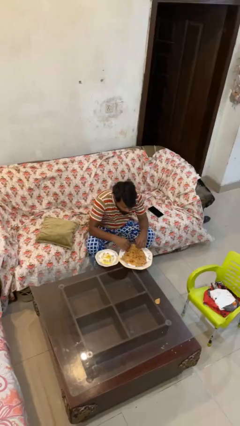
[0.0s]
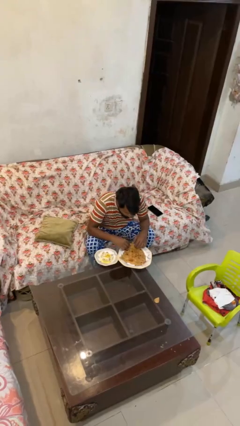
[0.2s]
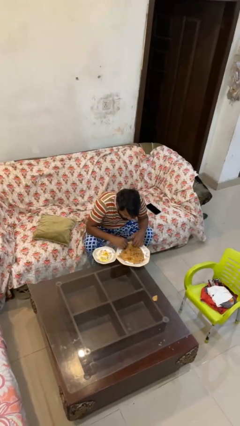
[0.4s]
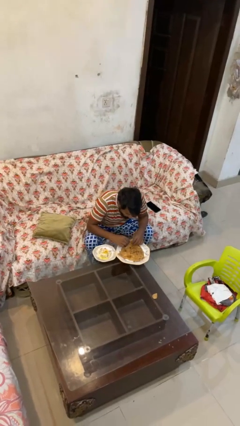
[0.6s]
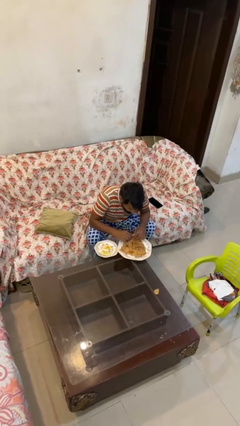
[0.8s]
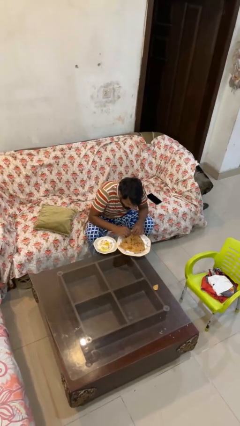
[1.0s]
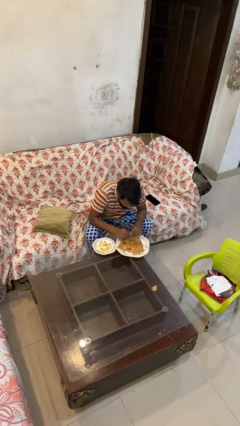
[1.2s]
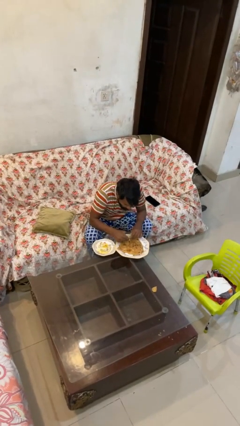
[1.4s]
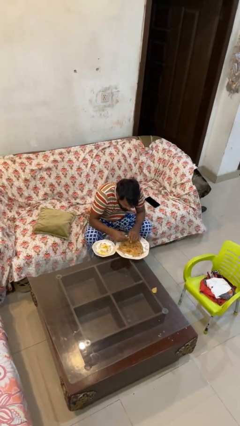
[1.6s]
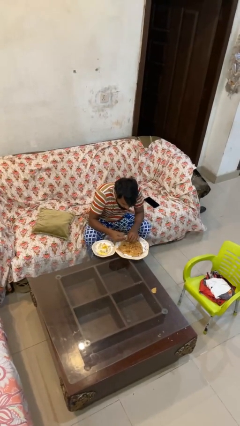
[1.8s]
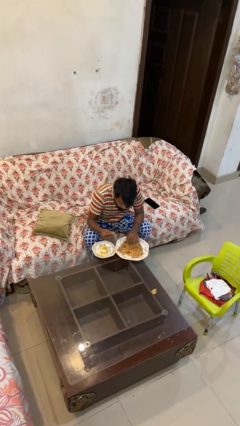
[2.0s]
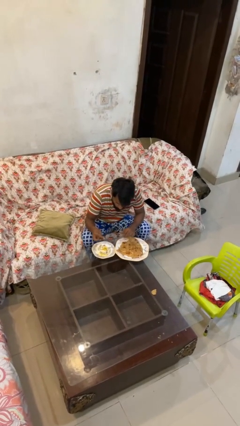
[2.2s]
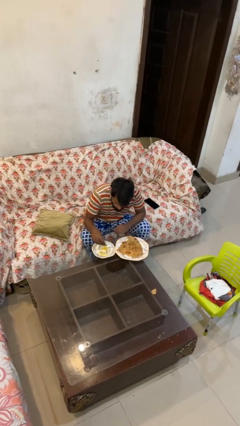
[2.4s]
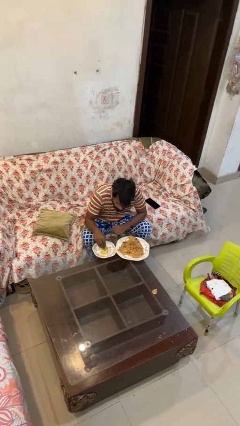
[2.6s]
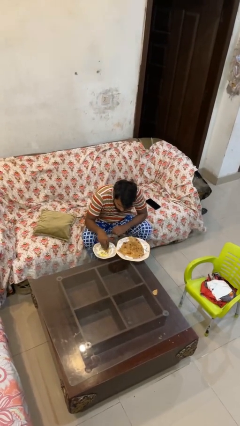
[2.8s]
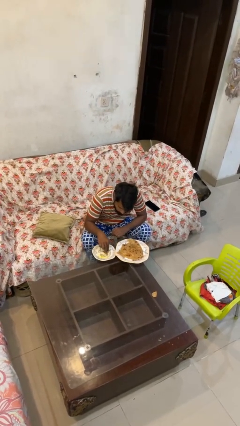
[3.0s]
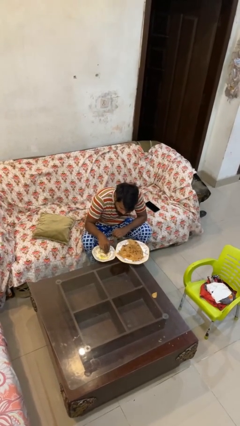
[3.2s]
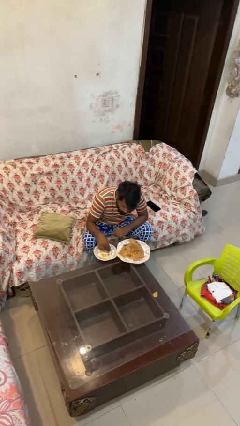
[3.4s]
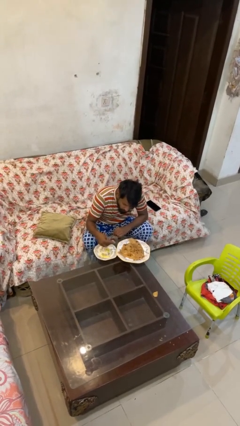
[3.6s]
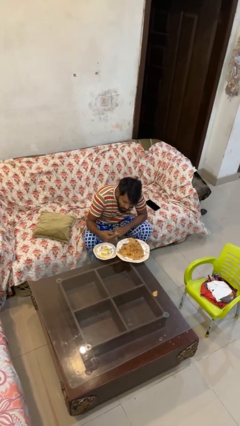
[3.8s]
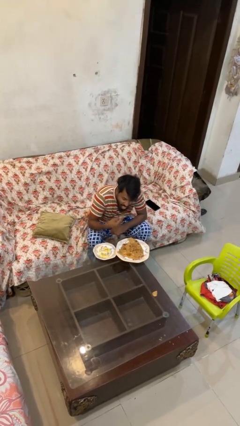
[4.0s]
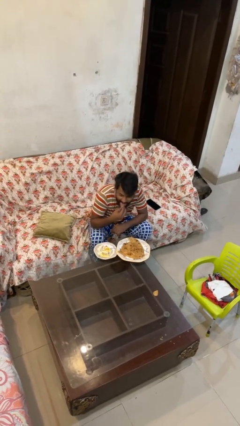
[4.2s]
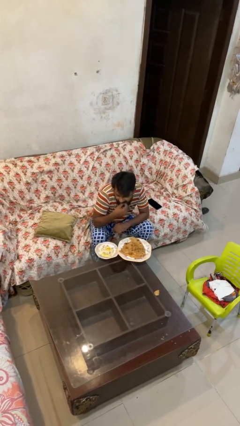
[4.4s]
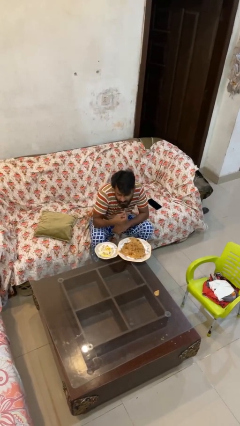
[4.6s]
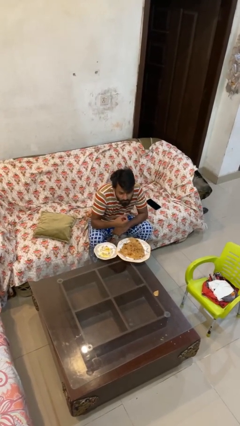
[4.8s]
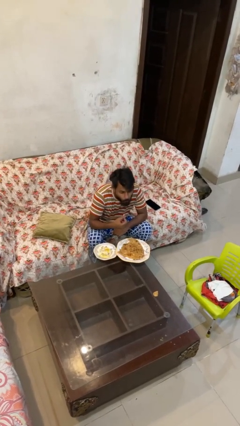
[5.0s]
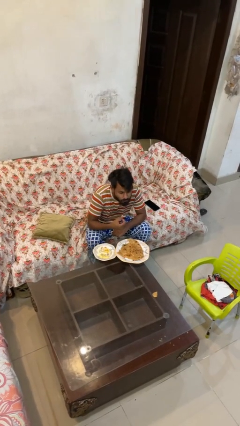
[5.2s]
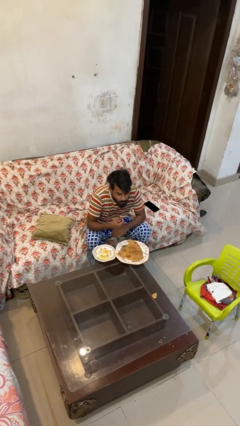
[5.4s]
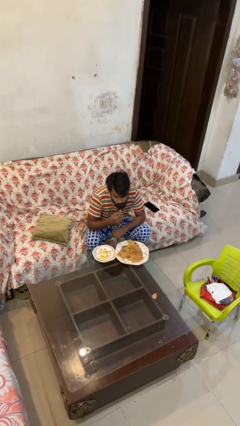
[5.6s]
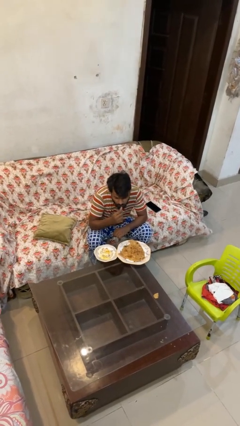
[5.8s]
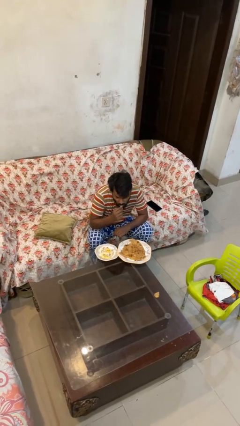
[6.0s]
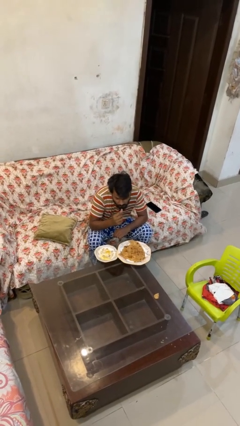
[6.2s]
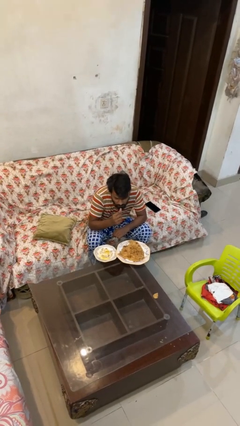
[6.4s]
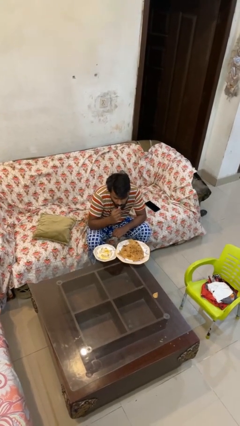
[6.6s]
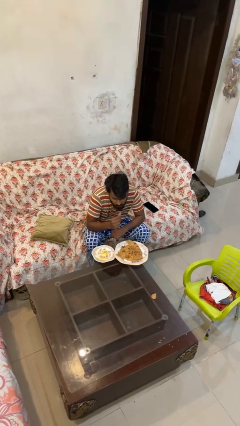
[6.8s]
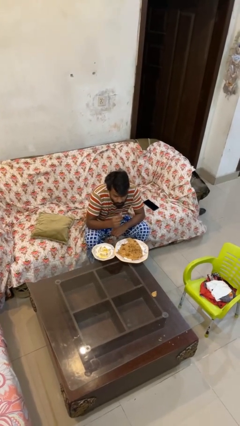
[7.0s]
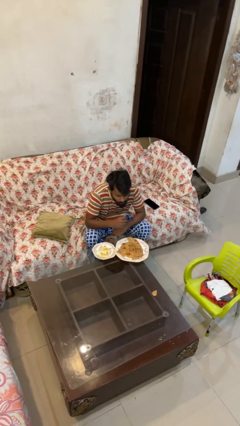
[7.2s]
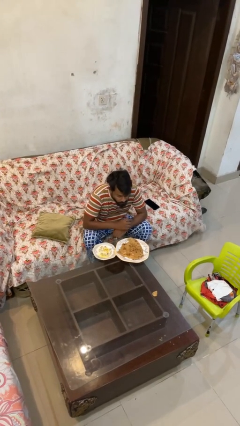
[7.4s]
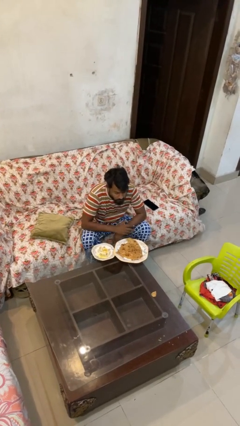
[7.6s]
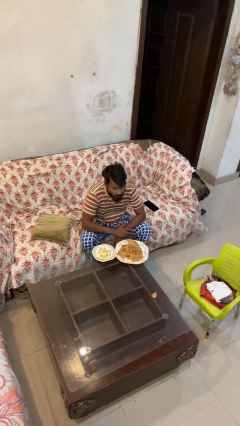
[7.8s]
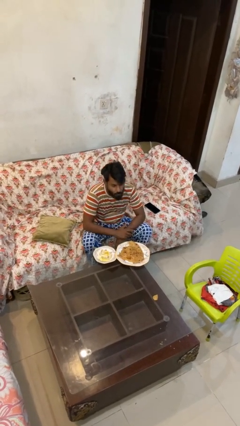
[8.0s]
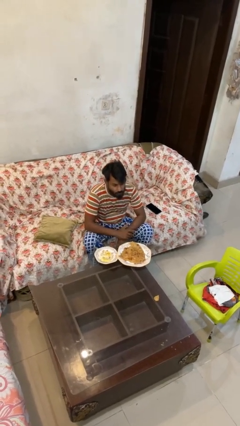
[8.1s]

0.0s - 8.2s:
person eats with hands

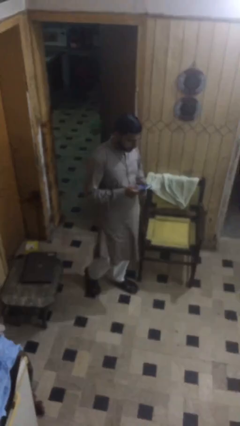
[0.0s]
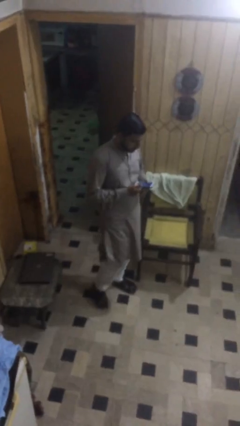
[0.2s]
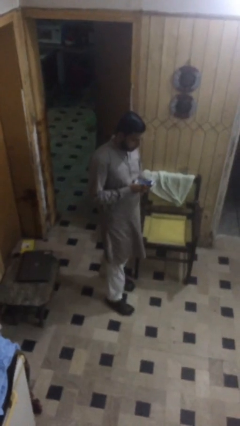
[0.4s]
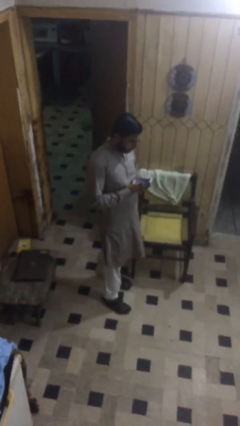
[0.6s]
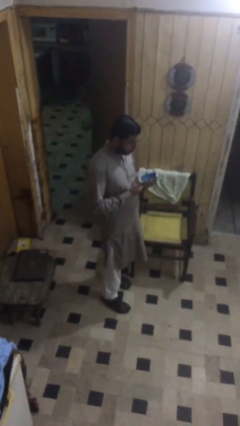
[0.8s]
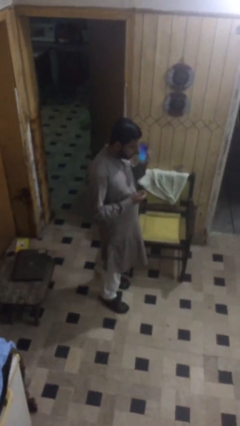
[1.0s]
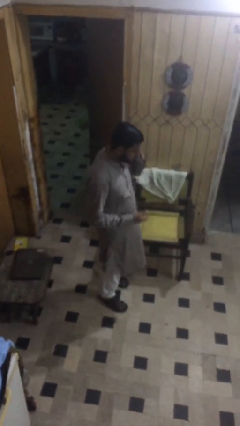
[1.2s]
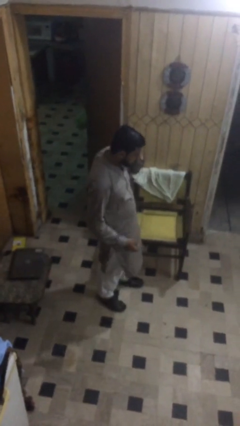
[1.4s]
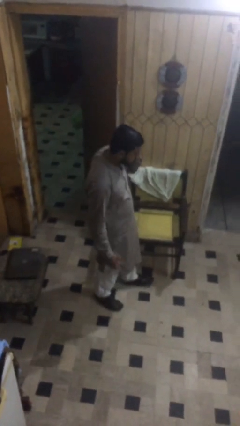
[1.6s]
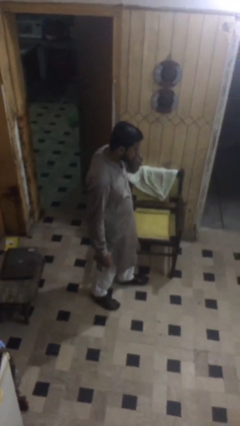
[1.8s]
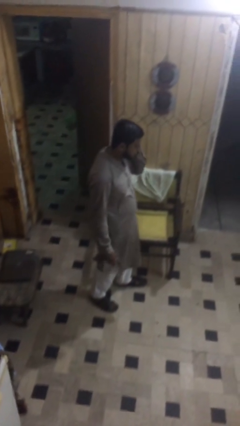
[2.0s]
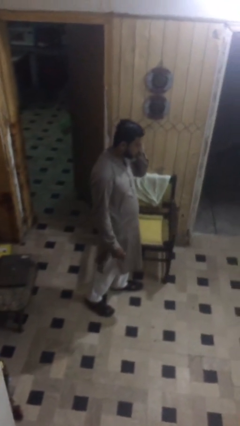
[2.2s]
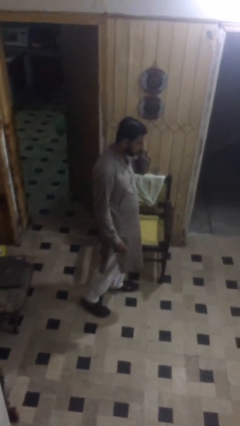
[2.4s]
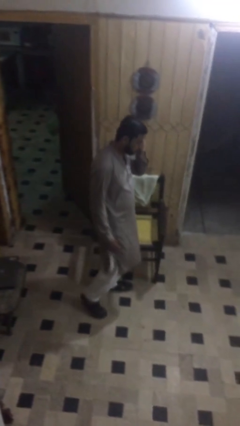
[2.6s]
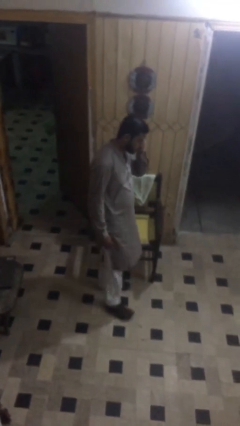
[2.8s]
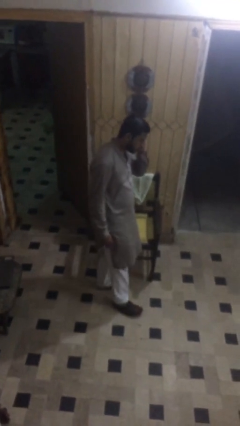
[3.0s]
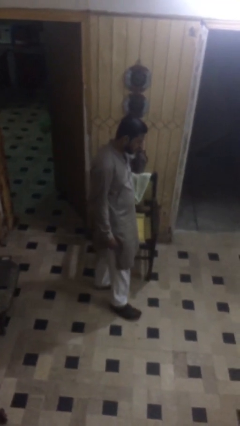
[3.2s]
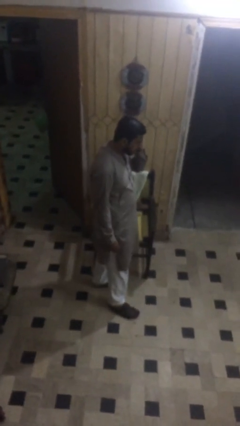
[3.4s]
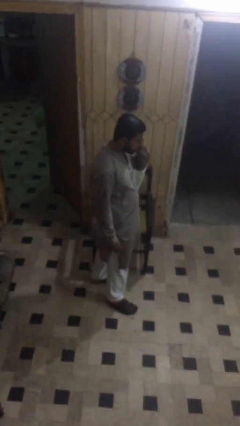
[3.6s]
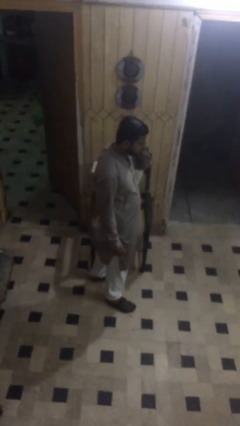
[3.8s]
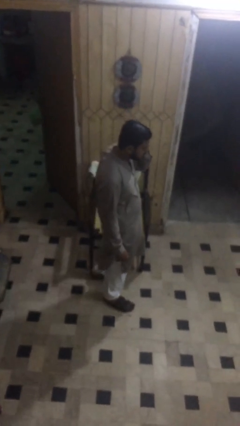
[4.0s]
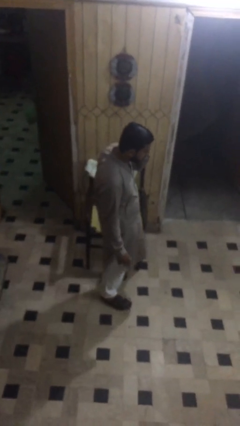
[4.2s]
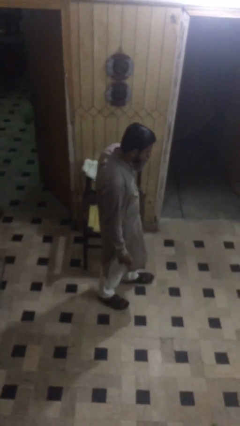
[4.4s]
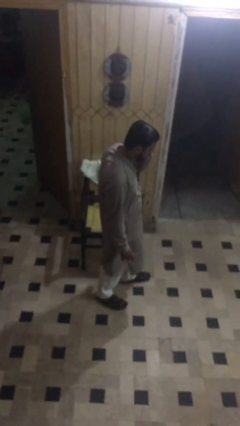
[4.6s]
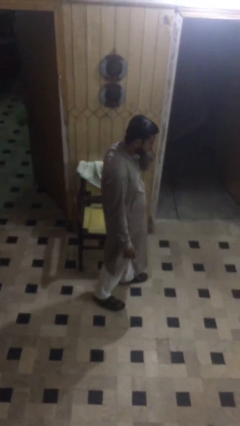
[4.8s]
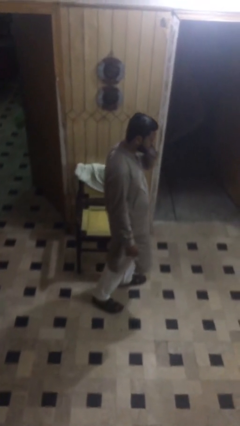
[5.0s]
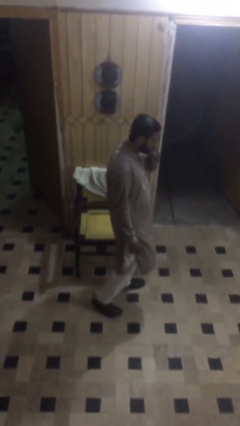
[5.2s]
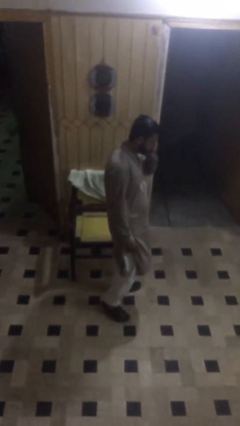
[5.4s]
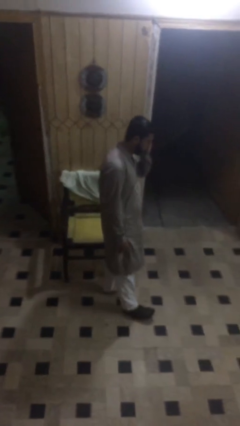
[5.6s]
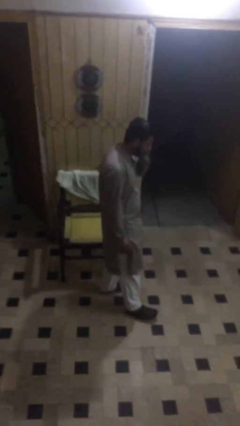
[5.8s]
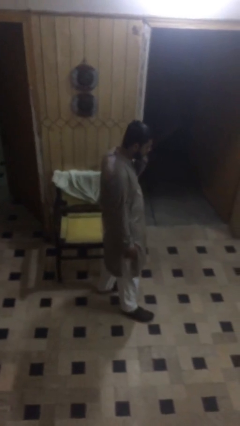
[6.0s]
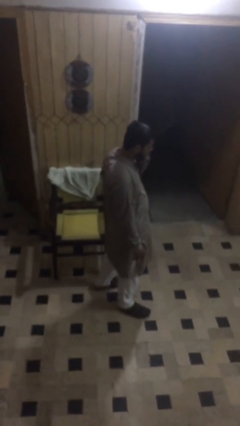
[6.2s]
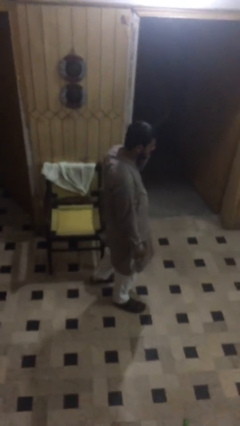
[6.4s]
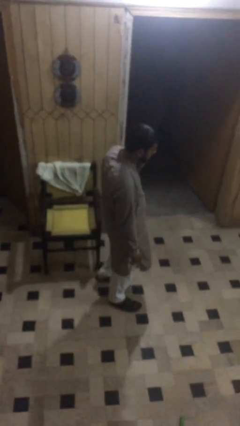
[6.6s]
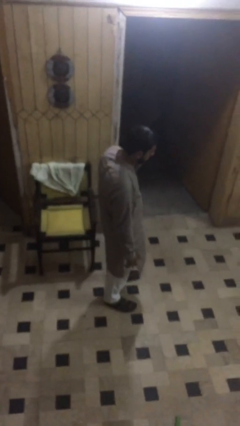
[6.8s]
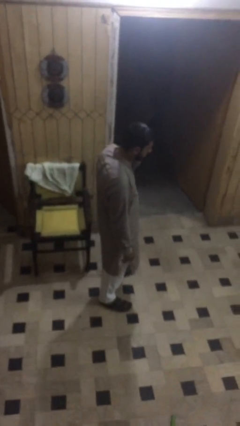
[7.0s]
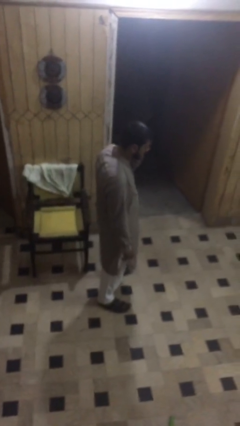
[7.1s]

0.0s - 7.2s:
person talks on phone

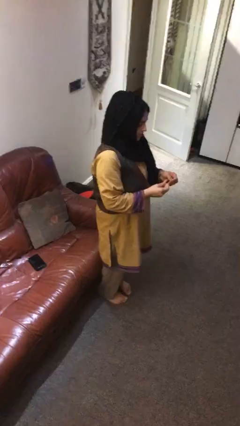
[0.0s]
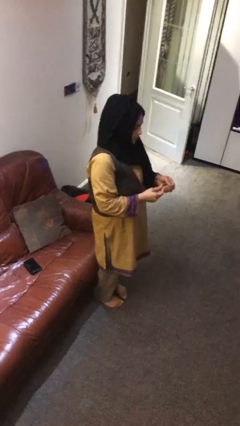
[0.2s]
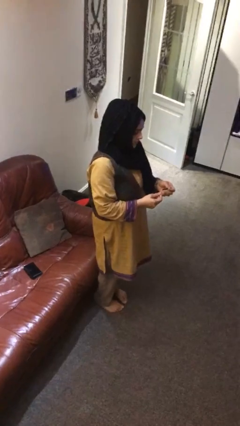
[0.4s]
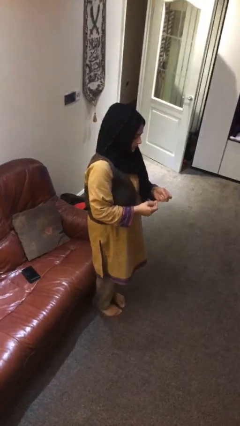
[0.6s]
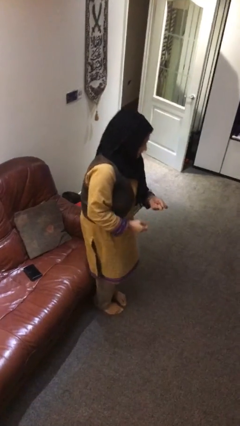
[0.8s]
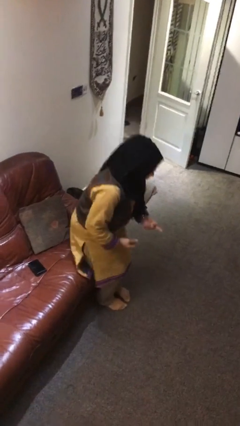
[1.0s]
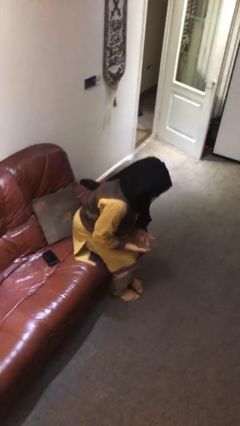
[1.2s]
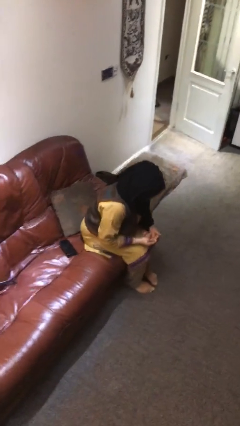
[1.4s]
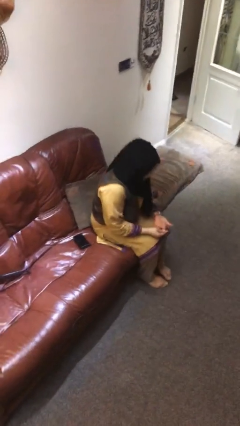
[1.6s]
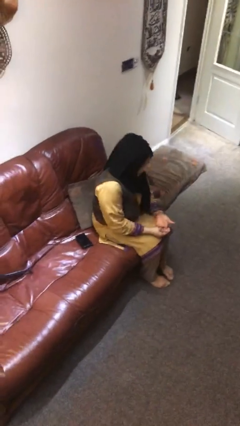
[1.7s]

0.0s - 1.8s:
person sits down

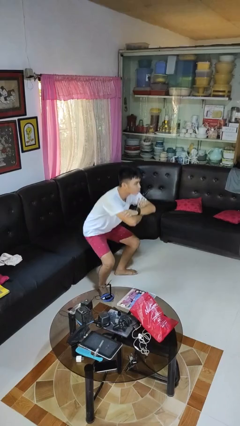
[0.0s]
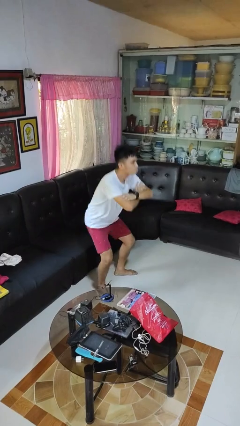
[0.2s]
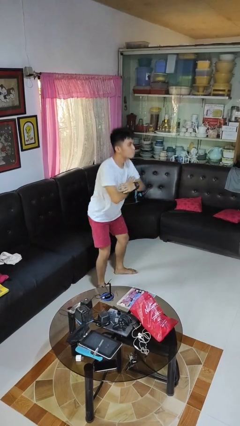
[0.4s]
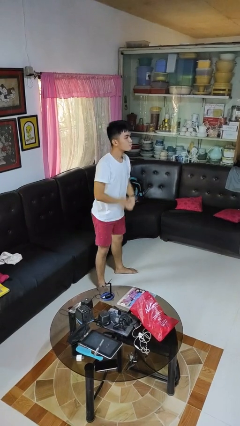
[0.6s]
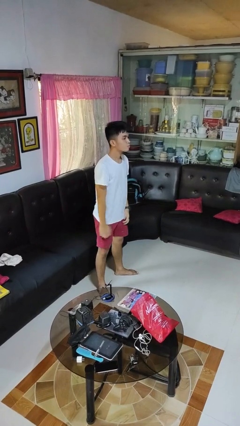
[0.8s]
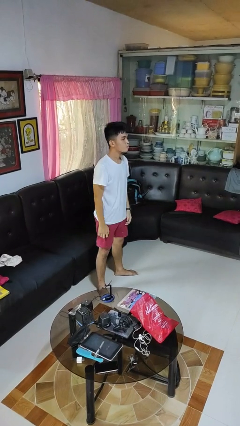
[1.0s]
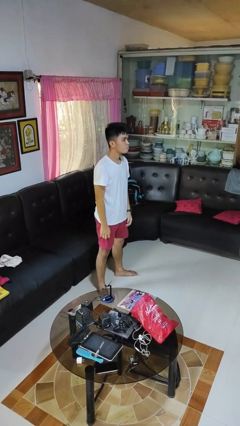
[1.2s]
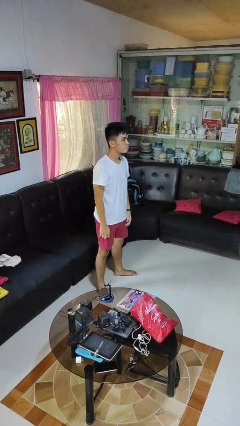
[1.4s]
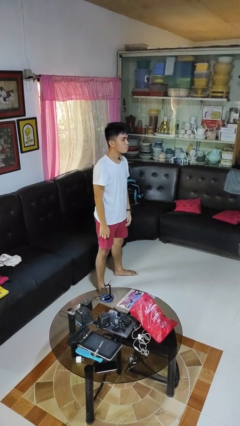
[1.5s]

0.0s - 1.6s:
person stands up
